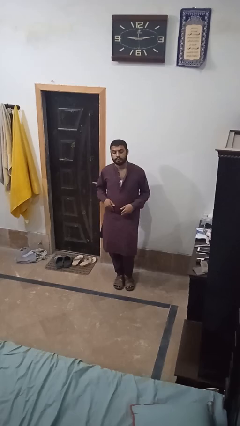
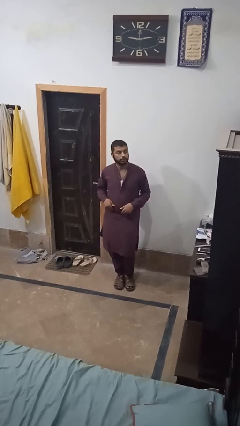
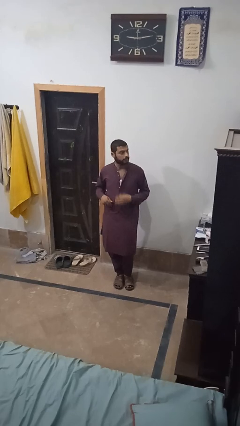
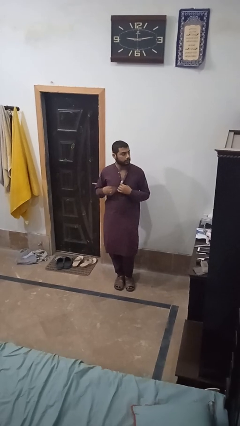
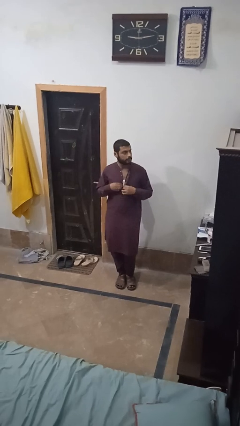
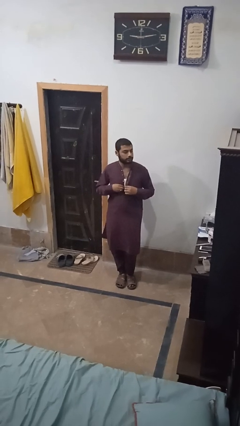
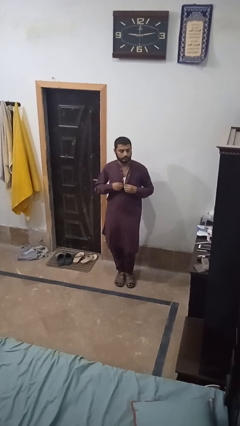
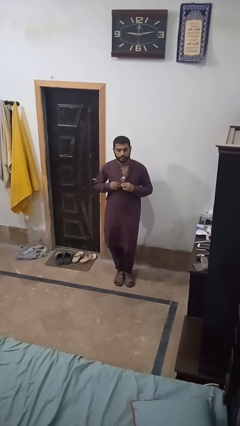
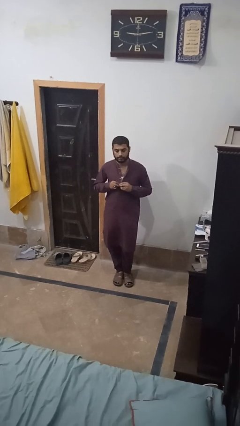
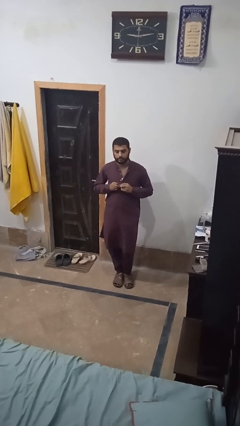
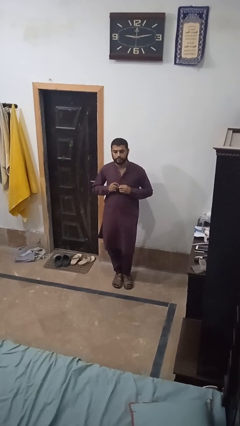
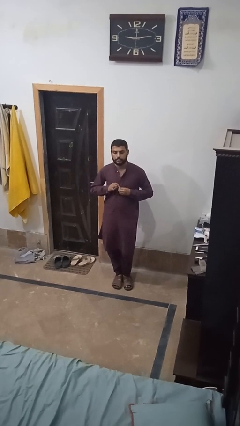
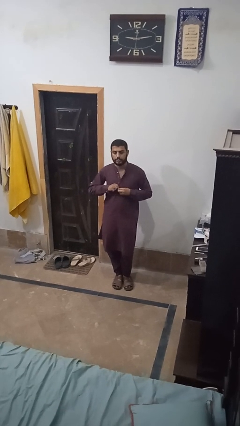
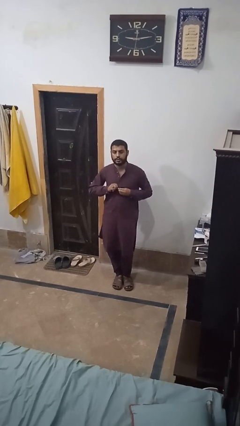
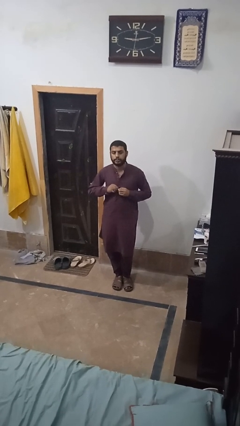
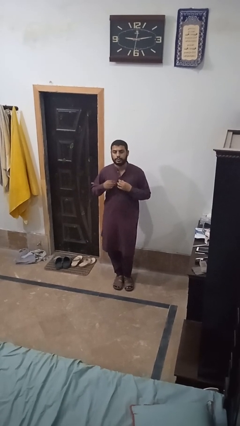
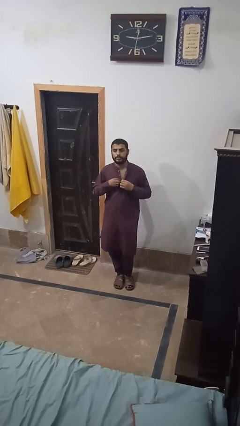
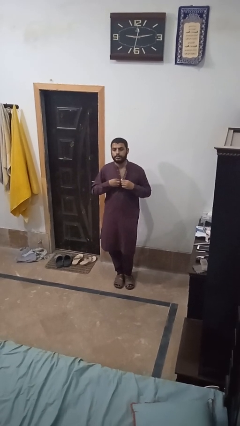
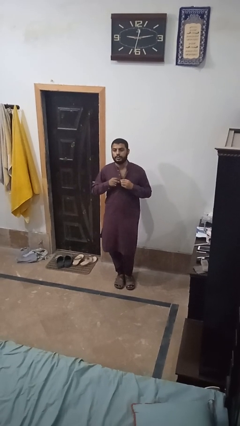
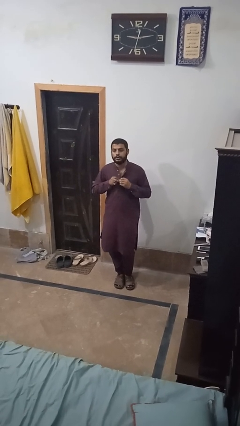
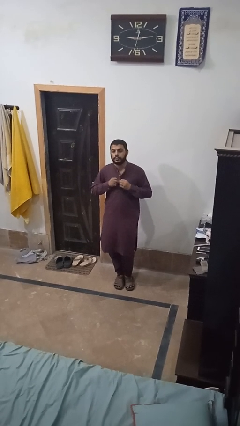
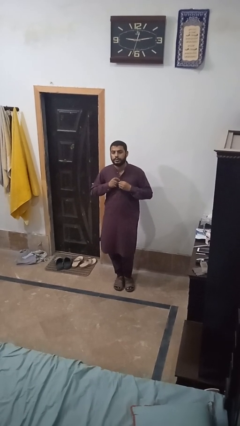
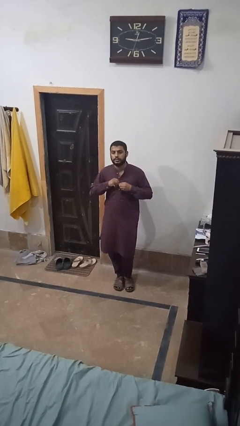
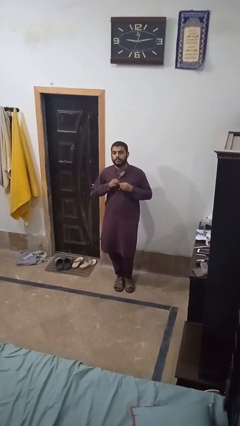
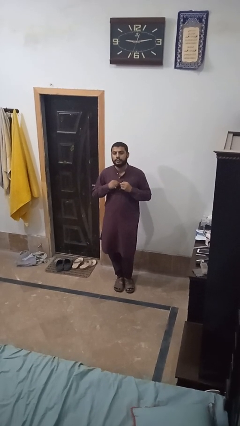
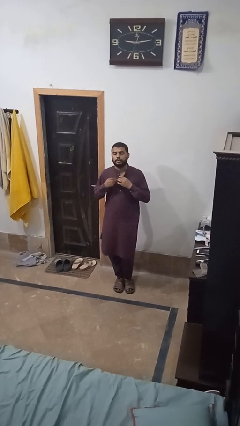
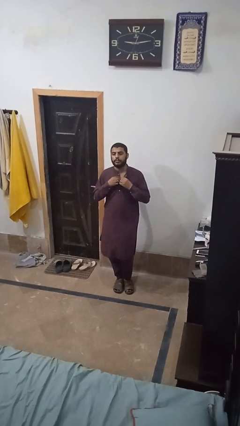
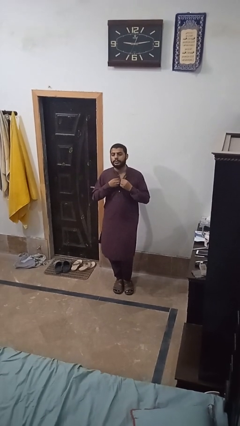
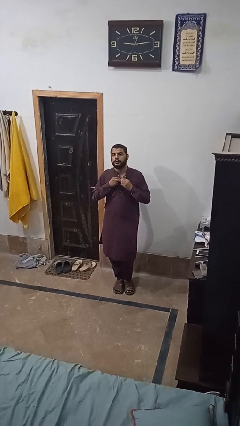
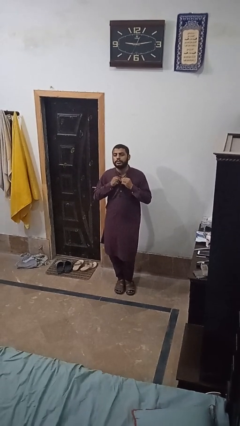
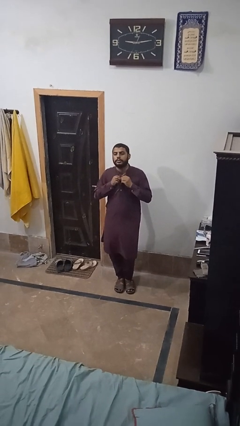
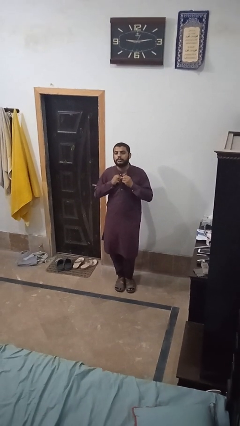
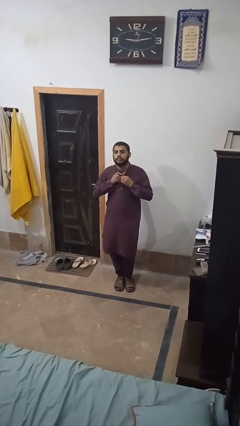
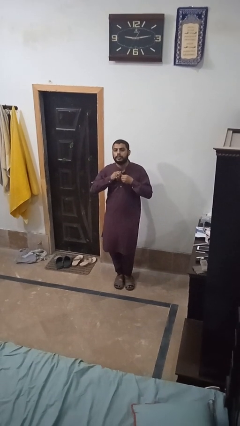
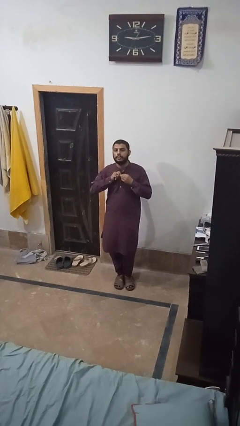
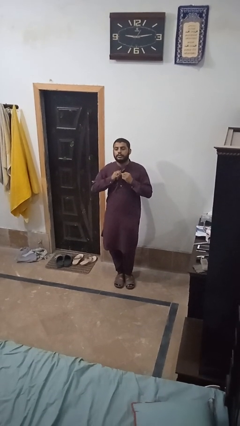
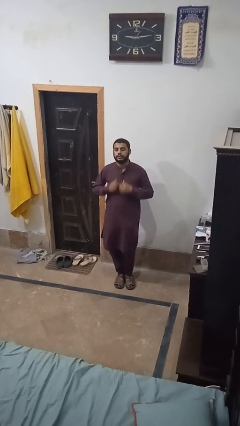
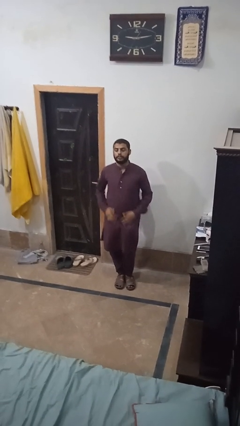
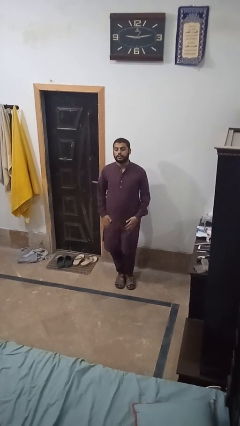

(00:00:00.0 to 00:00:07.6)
person buttons shirt

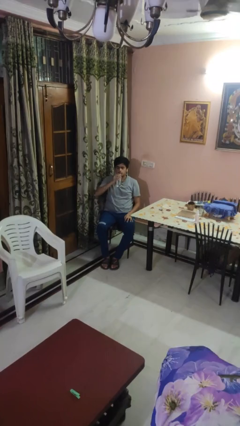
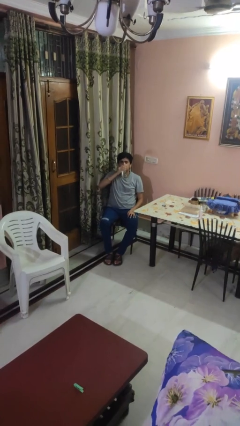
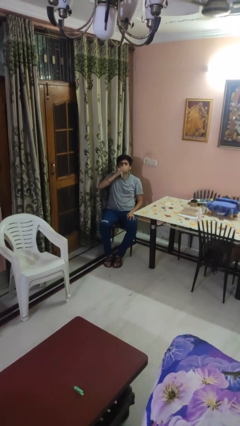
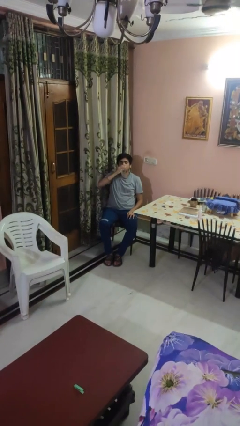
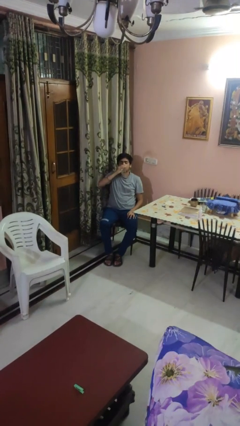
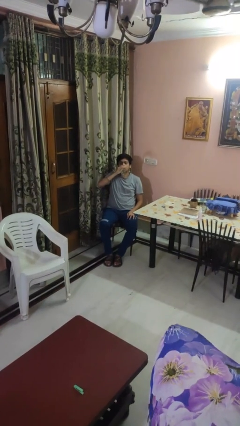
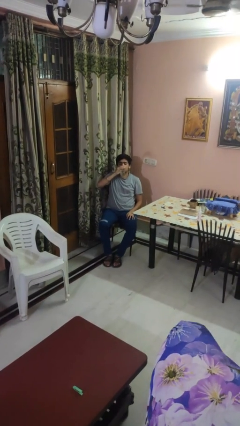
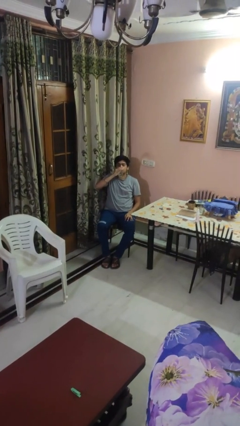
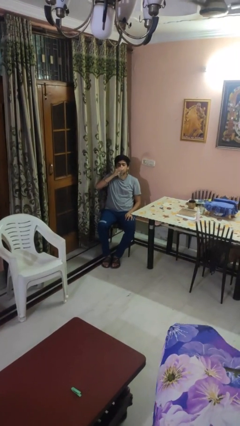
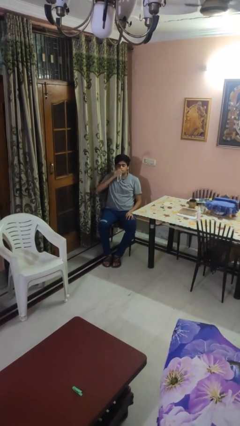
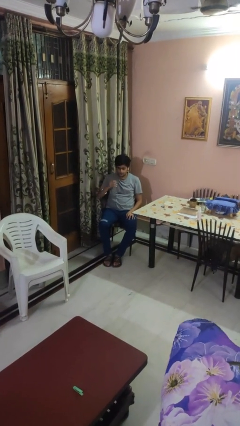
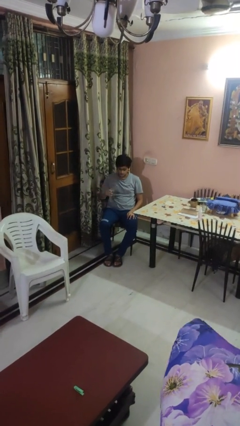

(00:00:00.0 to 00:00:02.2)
person drinks from bottle

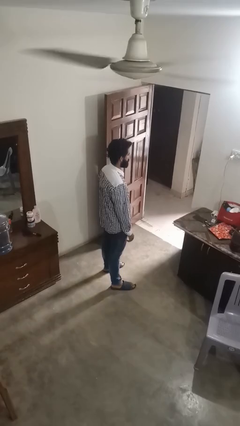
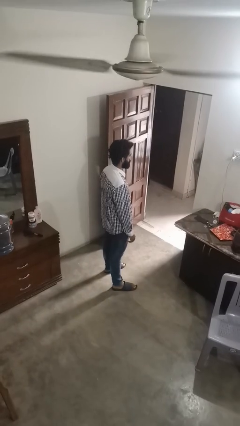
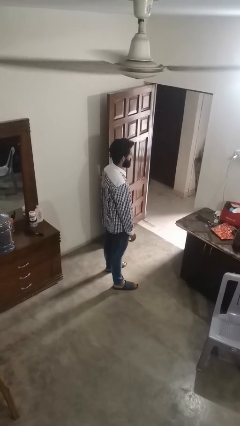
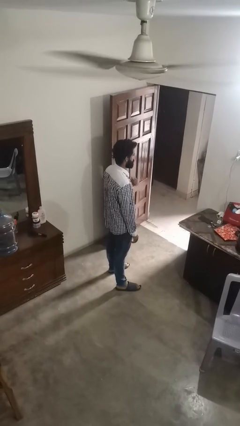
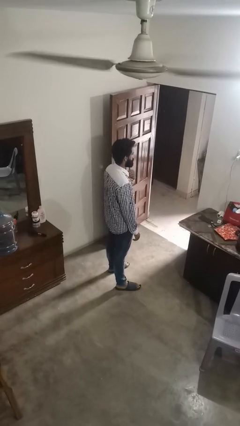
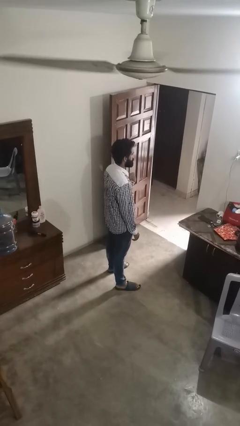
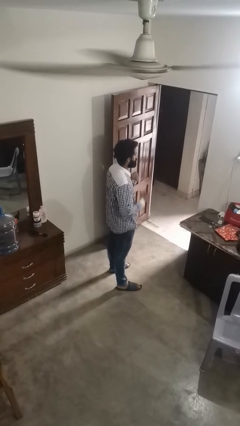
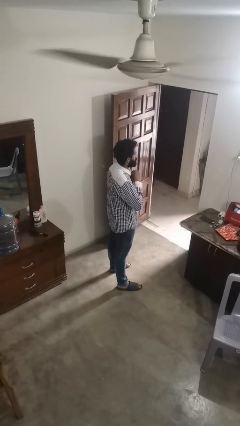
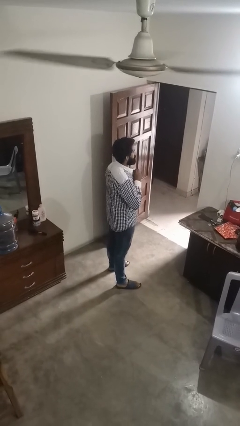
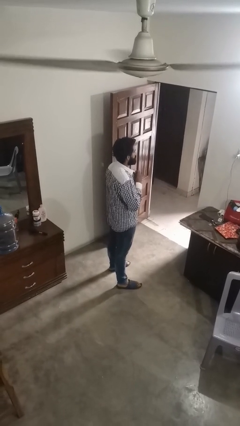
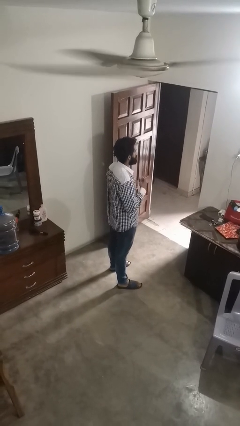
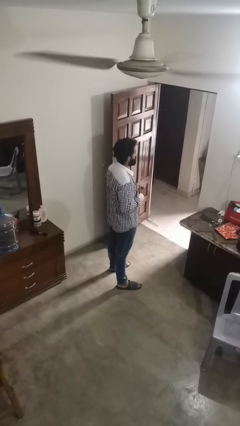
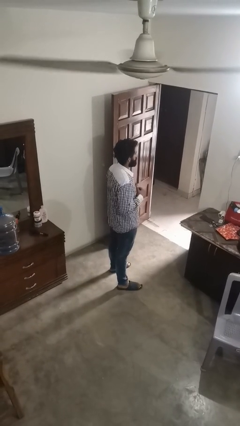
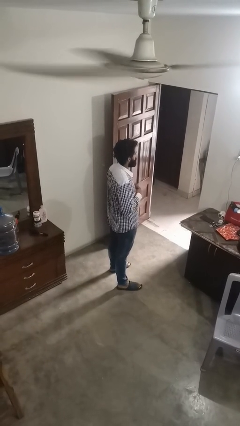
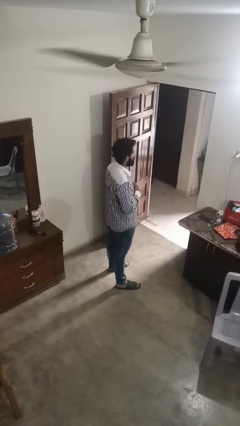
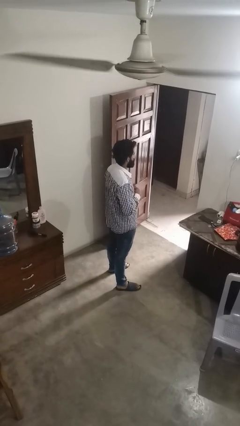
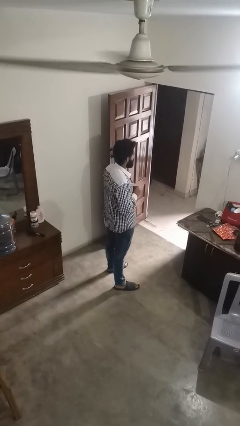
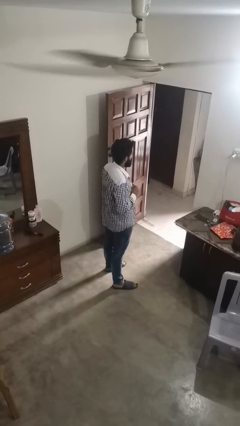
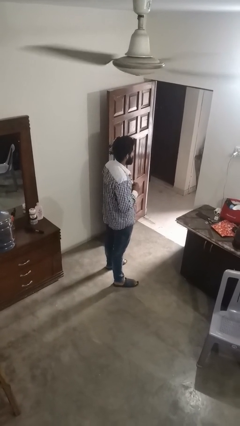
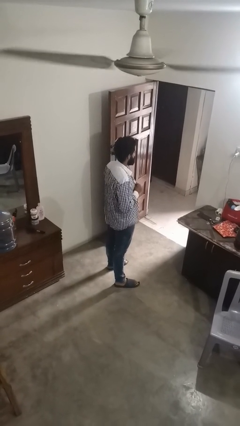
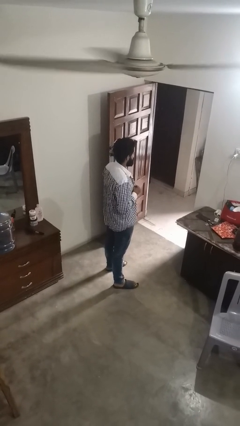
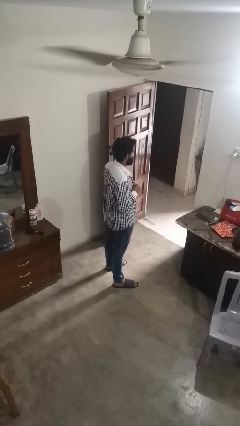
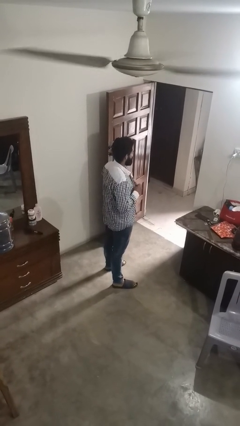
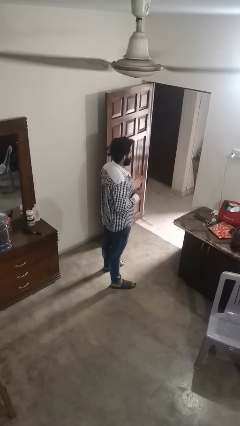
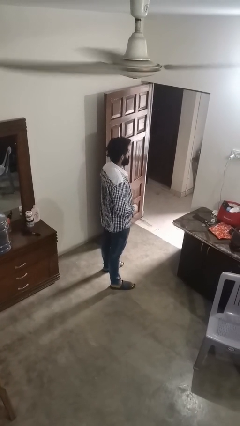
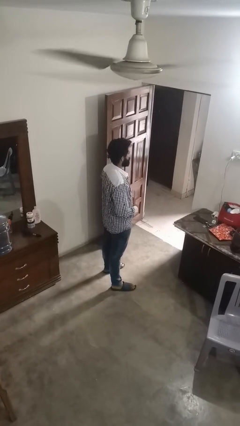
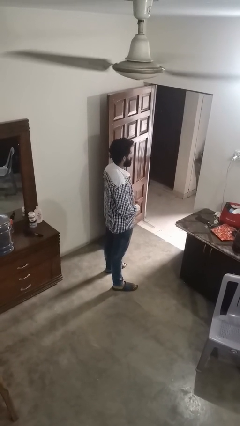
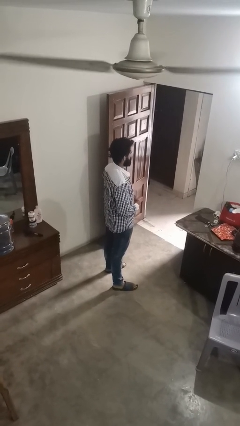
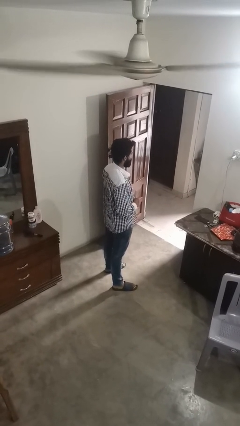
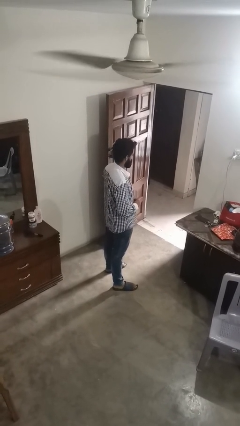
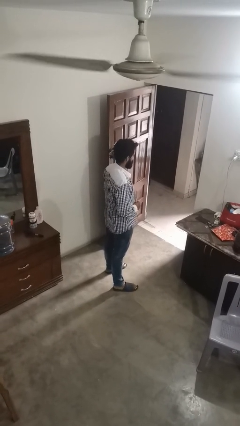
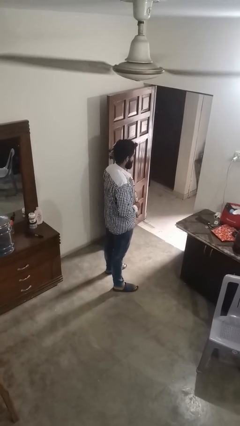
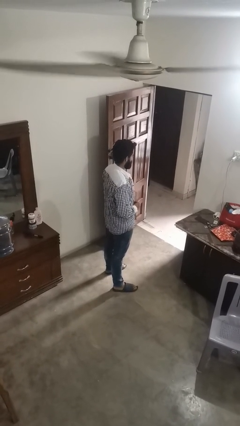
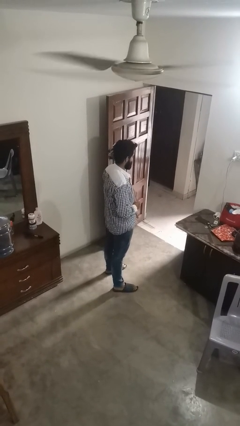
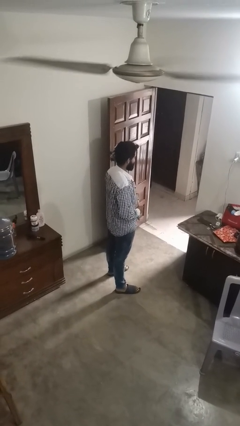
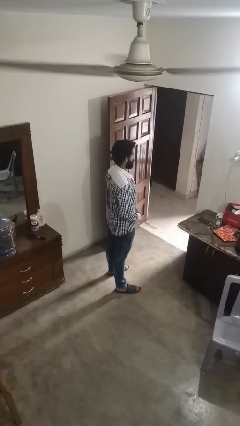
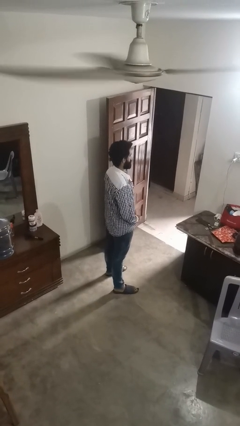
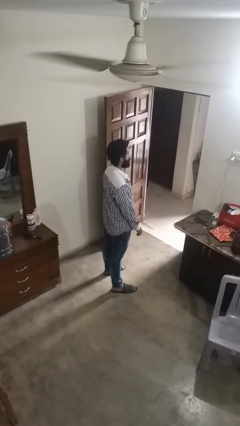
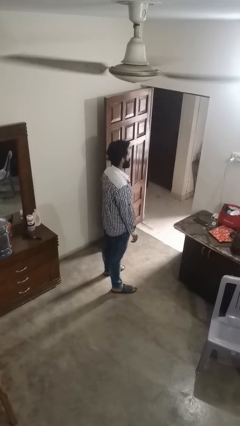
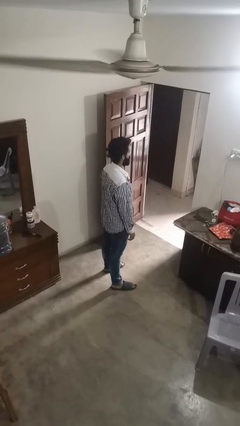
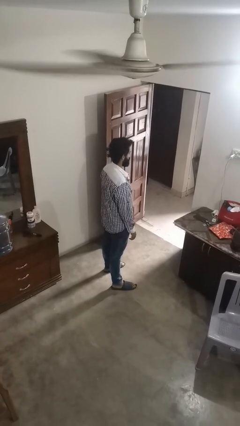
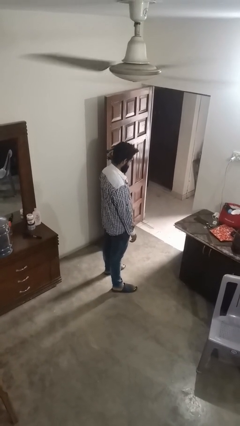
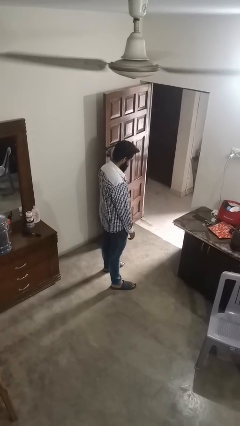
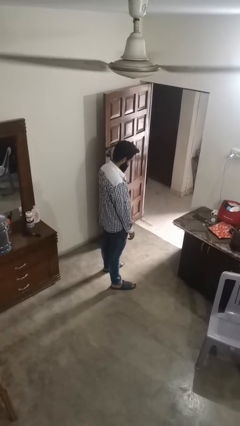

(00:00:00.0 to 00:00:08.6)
person unbuttons shirt
